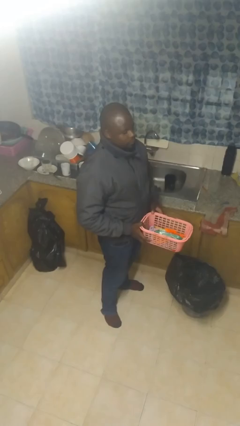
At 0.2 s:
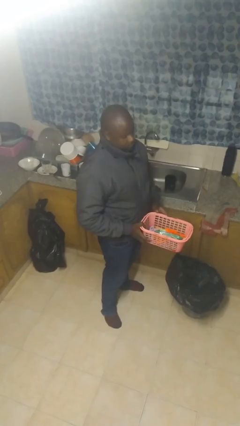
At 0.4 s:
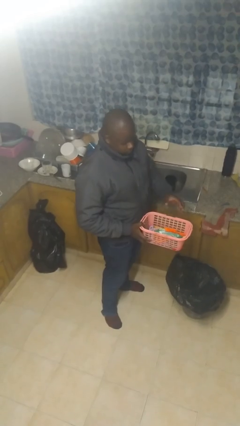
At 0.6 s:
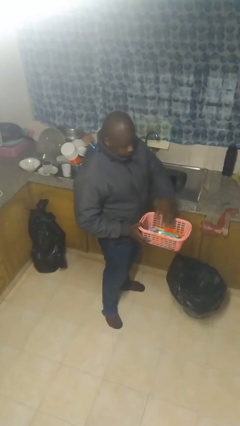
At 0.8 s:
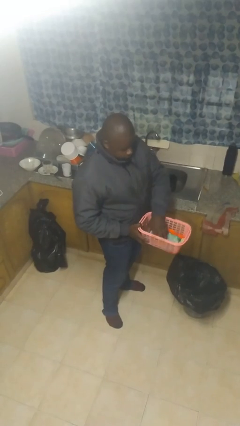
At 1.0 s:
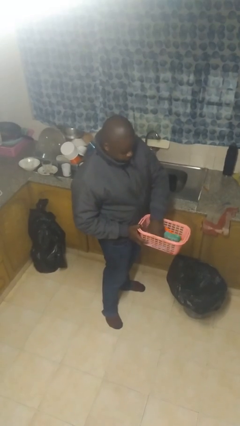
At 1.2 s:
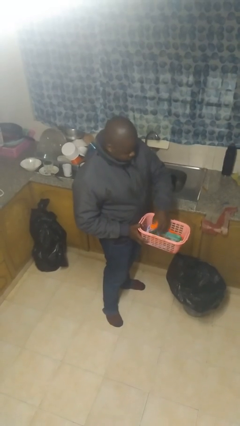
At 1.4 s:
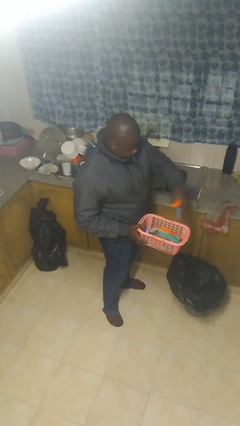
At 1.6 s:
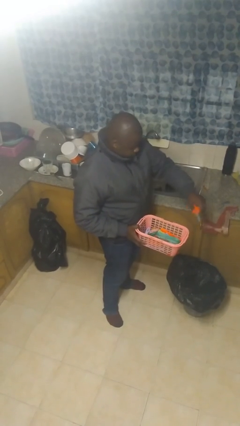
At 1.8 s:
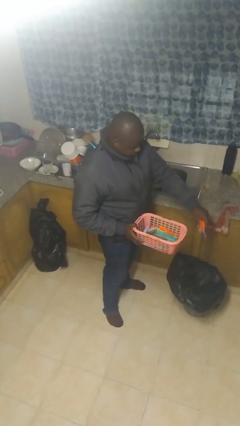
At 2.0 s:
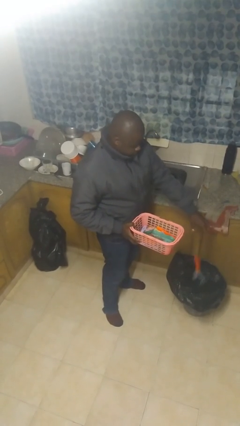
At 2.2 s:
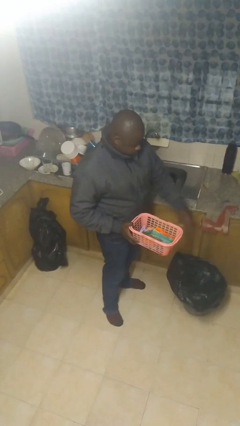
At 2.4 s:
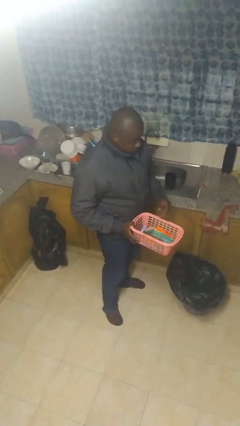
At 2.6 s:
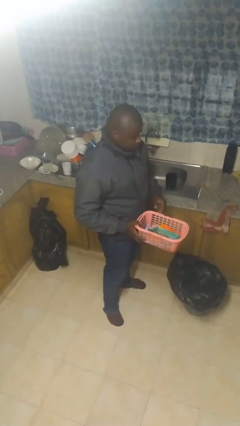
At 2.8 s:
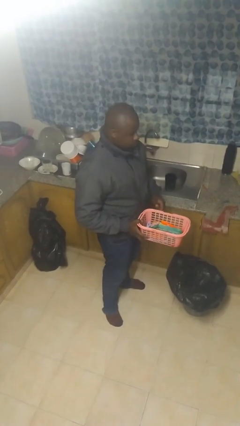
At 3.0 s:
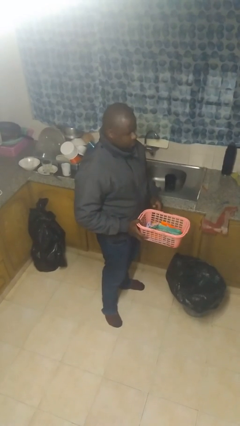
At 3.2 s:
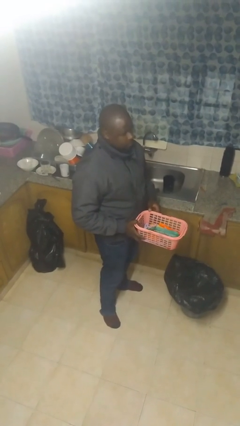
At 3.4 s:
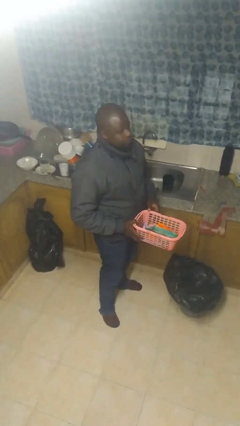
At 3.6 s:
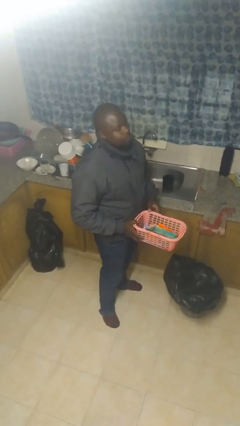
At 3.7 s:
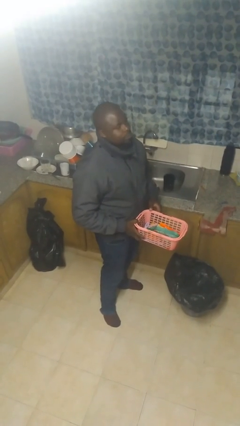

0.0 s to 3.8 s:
person discards trash

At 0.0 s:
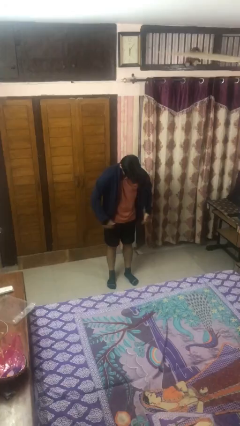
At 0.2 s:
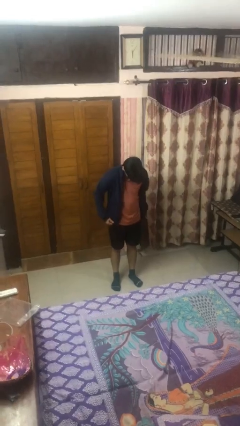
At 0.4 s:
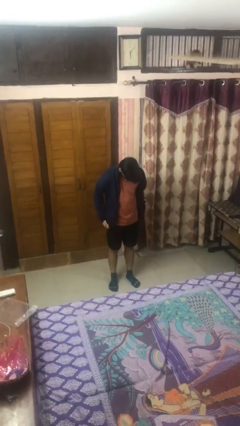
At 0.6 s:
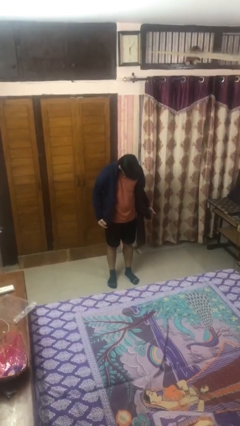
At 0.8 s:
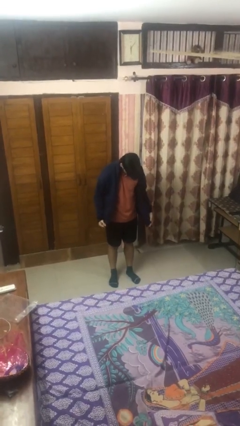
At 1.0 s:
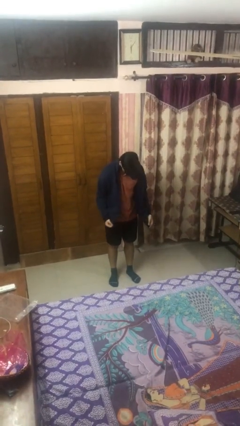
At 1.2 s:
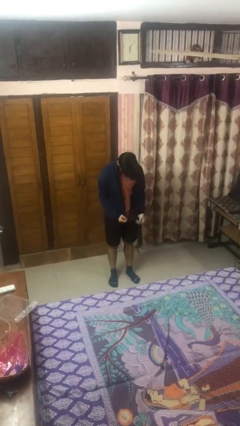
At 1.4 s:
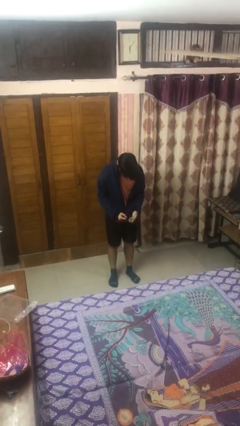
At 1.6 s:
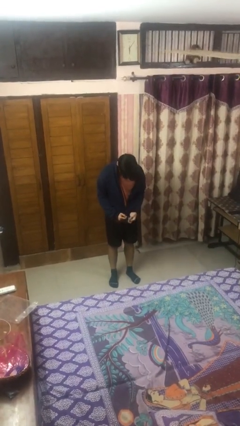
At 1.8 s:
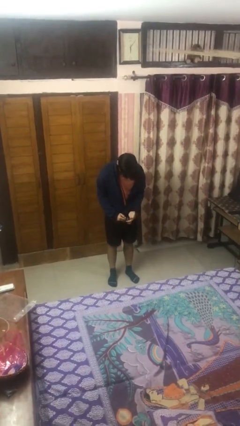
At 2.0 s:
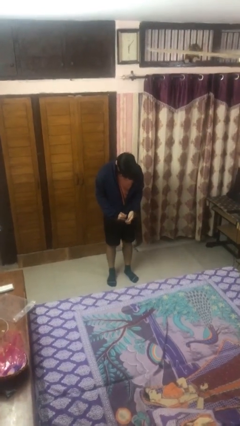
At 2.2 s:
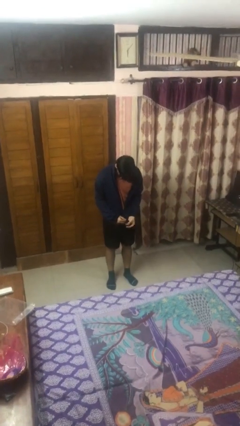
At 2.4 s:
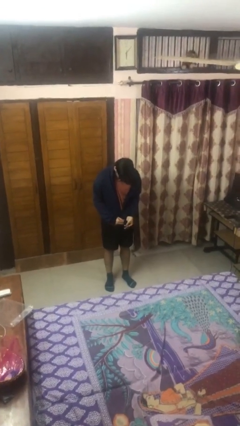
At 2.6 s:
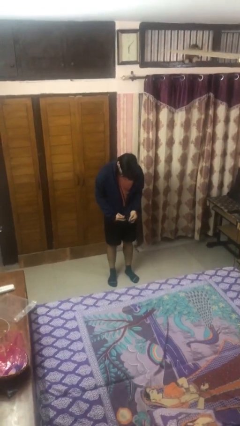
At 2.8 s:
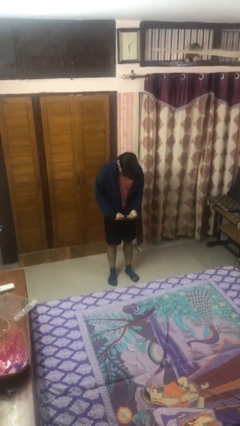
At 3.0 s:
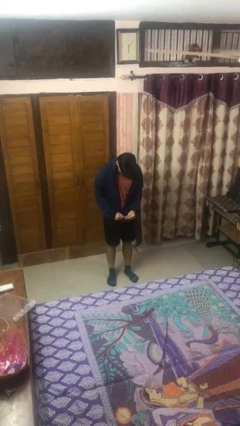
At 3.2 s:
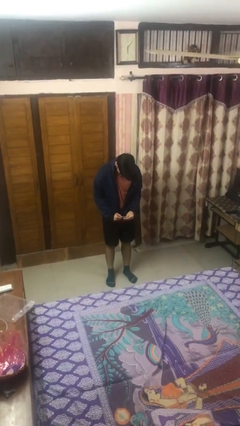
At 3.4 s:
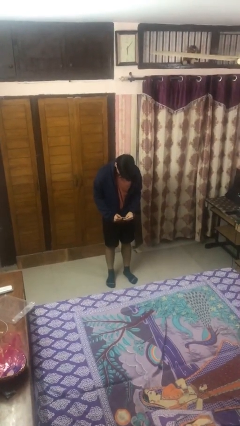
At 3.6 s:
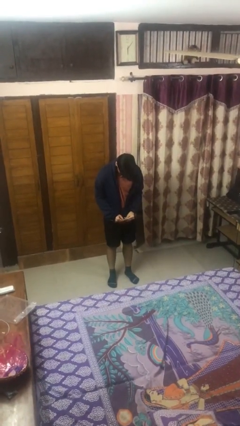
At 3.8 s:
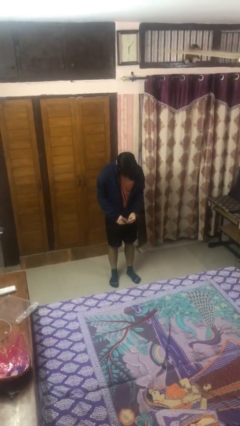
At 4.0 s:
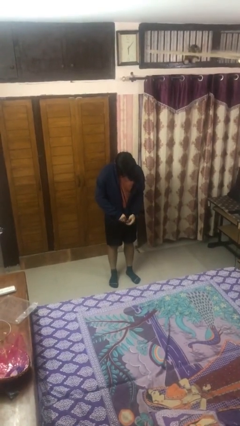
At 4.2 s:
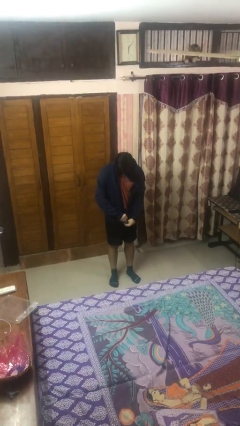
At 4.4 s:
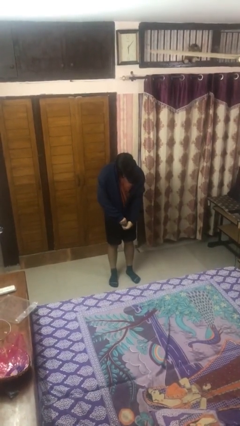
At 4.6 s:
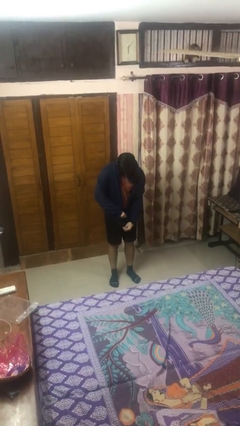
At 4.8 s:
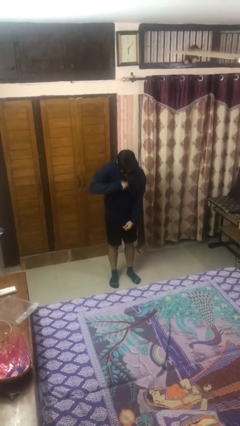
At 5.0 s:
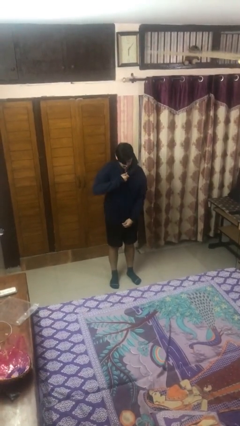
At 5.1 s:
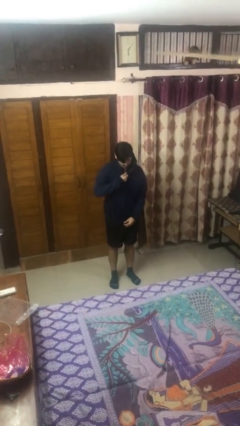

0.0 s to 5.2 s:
person zips up jacket

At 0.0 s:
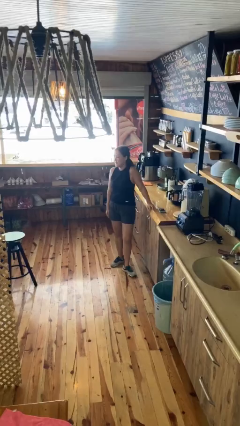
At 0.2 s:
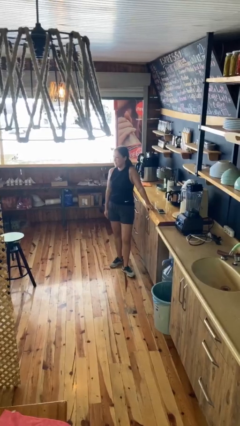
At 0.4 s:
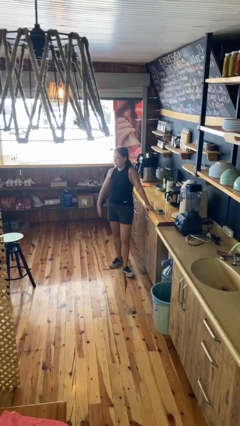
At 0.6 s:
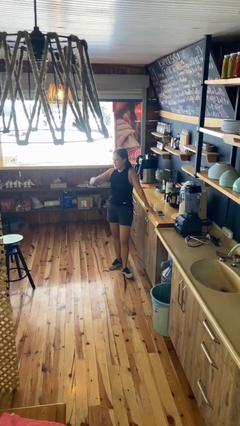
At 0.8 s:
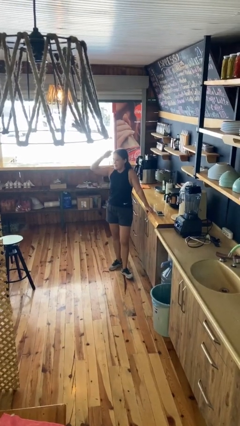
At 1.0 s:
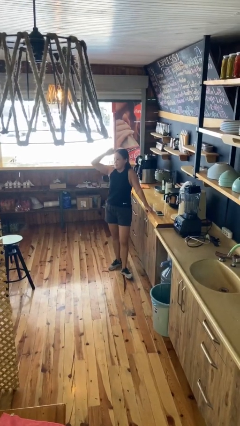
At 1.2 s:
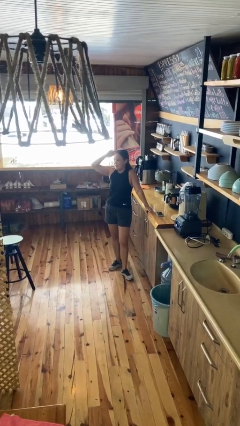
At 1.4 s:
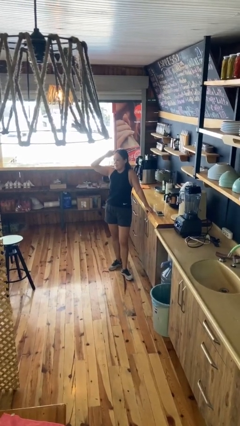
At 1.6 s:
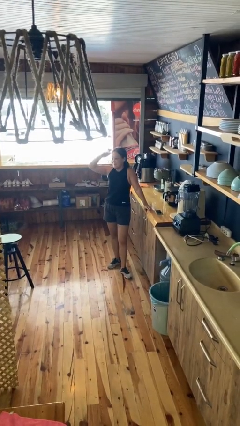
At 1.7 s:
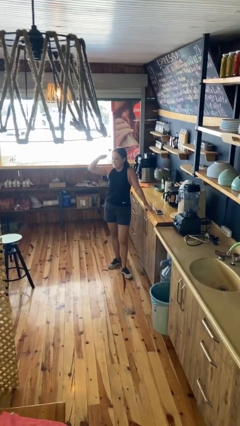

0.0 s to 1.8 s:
person salutes

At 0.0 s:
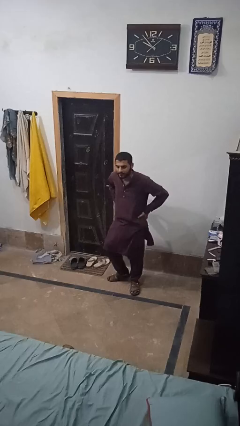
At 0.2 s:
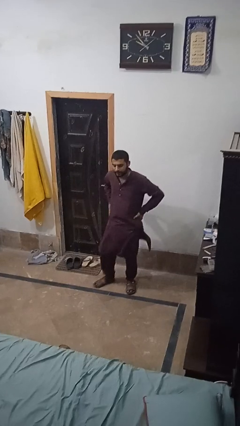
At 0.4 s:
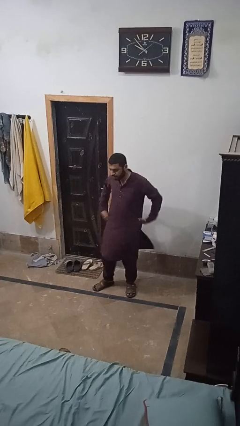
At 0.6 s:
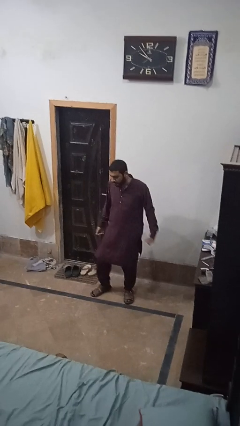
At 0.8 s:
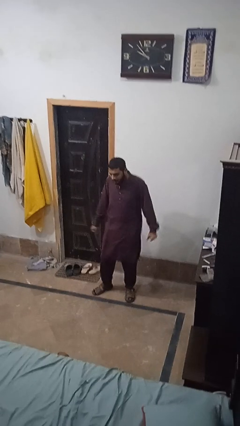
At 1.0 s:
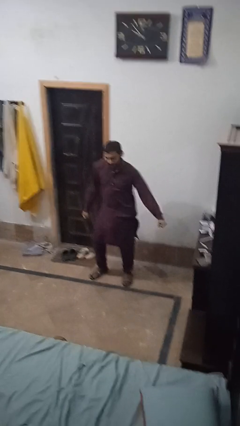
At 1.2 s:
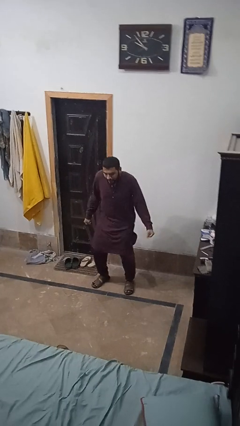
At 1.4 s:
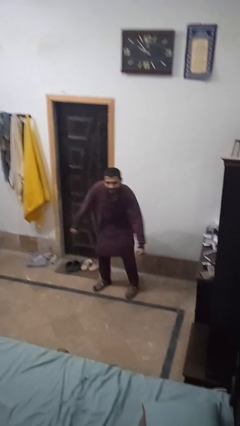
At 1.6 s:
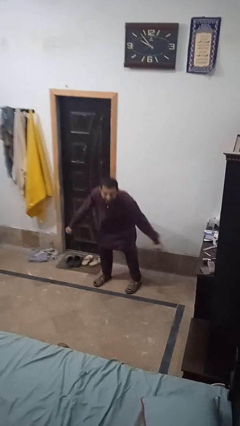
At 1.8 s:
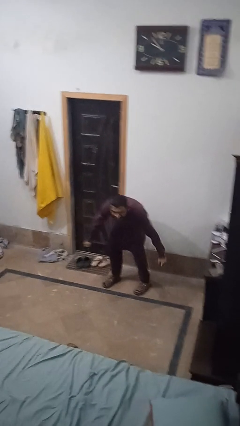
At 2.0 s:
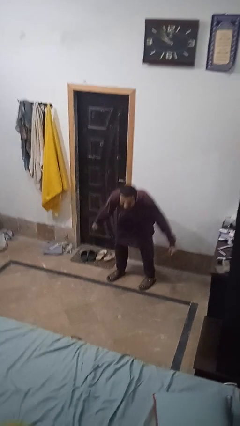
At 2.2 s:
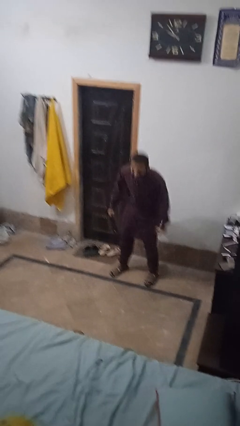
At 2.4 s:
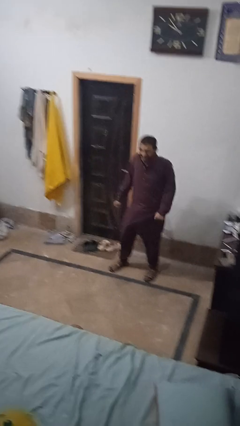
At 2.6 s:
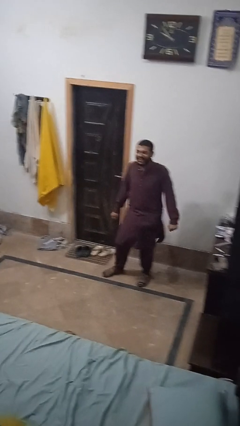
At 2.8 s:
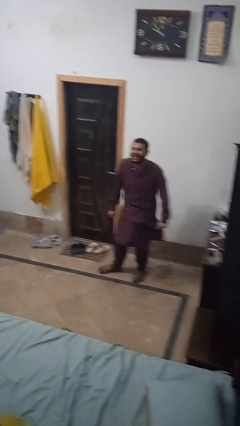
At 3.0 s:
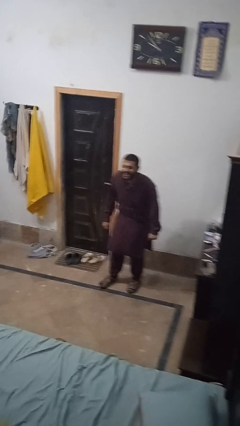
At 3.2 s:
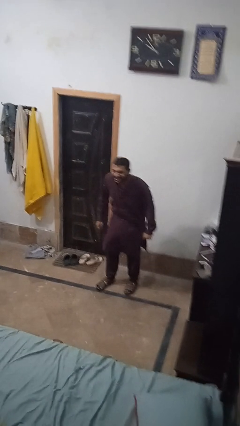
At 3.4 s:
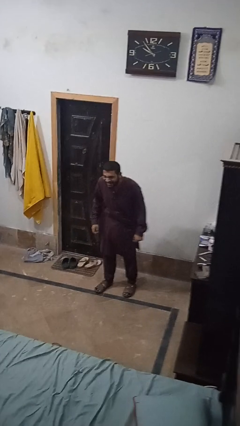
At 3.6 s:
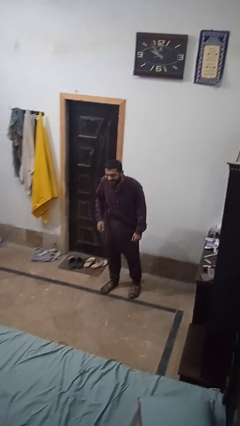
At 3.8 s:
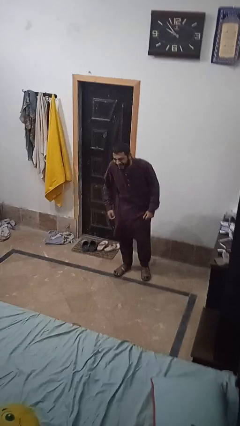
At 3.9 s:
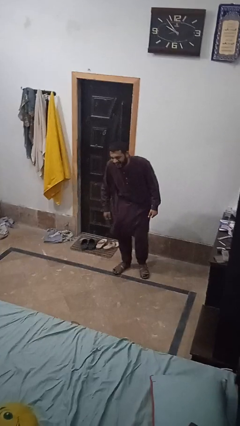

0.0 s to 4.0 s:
person dances in place

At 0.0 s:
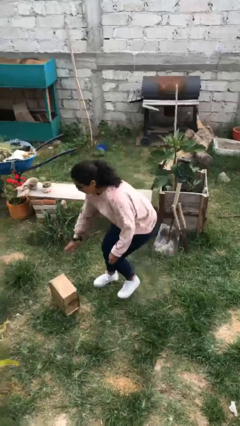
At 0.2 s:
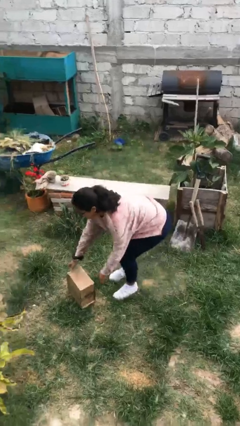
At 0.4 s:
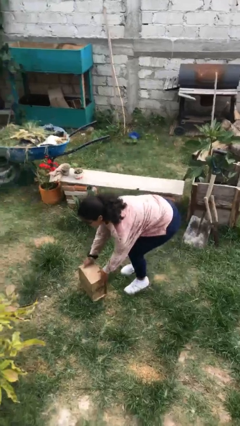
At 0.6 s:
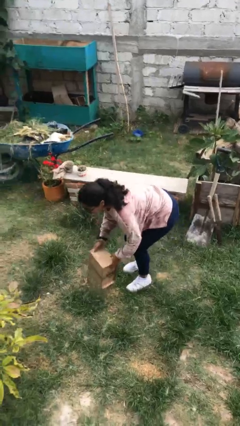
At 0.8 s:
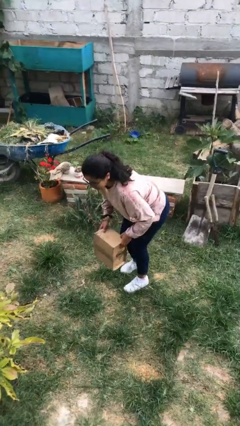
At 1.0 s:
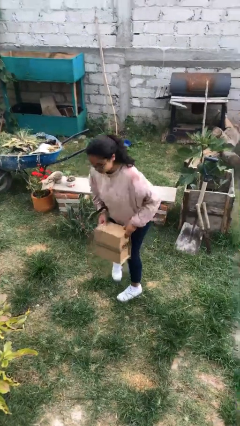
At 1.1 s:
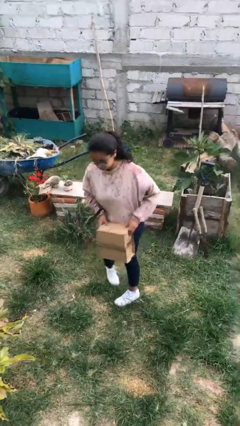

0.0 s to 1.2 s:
person picks up object from floor

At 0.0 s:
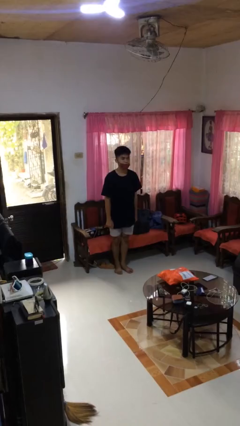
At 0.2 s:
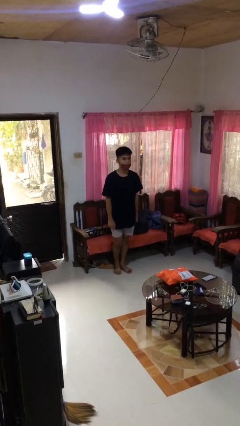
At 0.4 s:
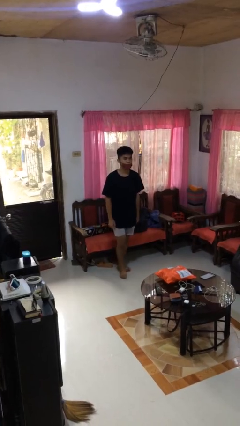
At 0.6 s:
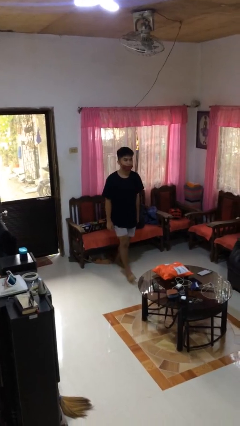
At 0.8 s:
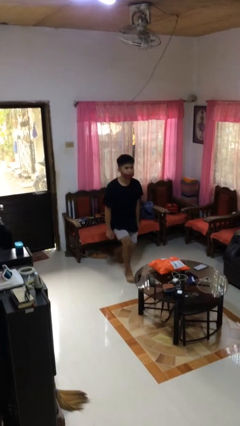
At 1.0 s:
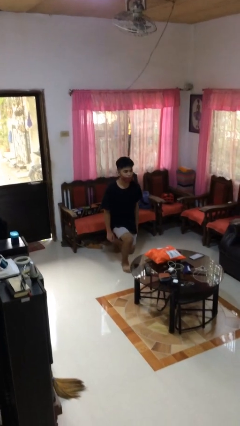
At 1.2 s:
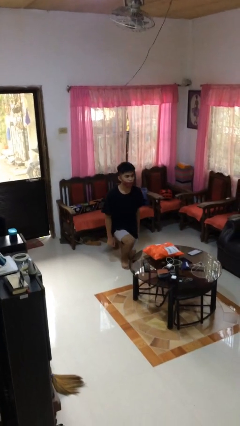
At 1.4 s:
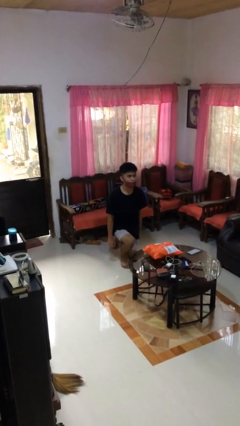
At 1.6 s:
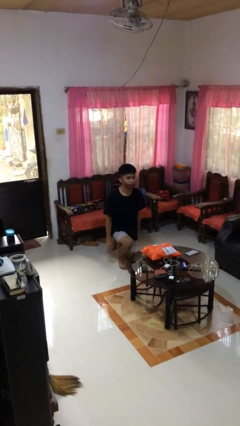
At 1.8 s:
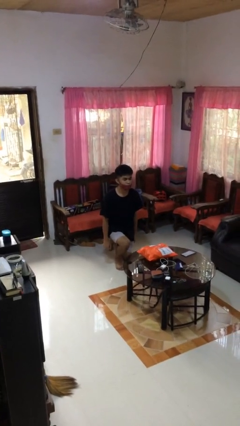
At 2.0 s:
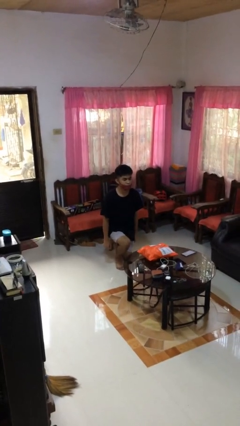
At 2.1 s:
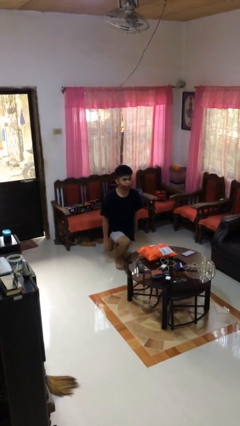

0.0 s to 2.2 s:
person kneels
